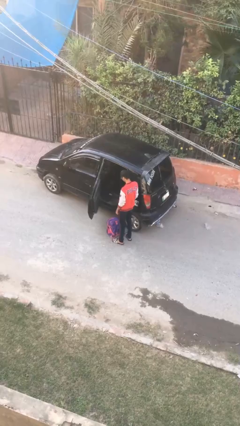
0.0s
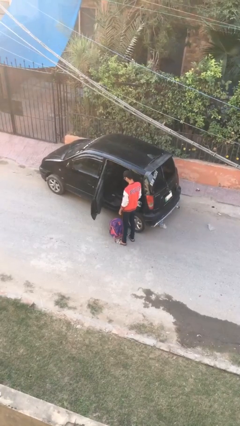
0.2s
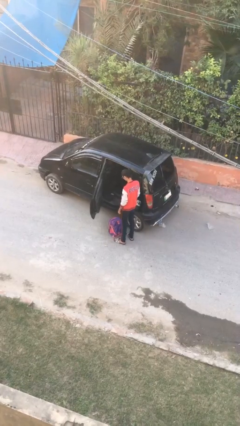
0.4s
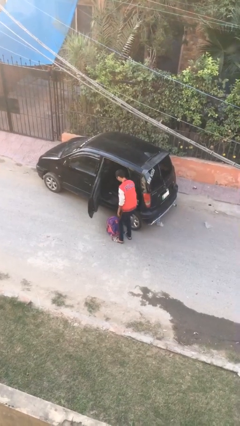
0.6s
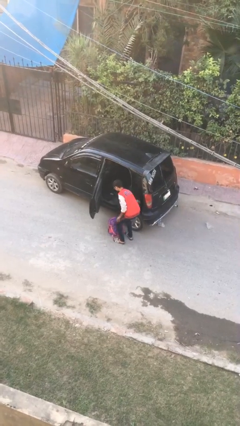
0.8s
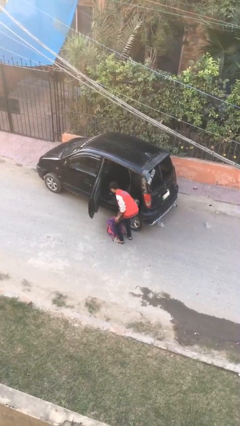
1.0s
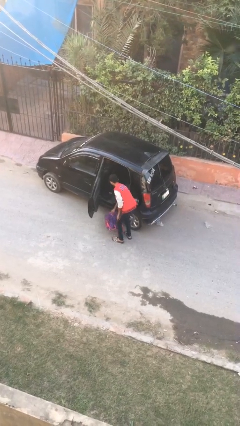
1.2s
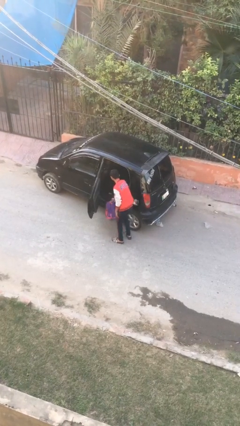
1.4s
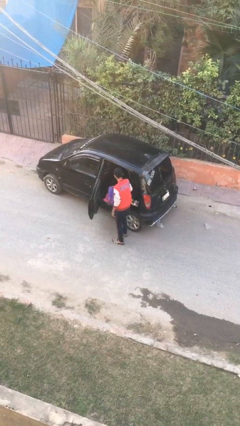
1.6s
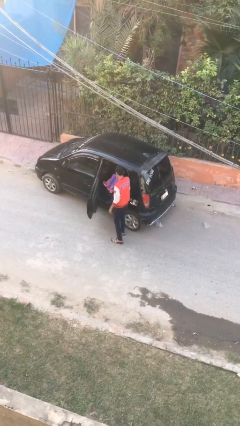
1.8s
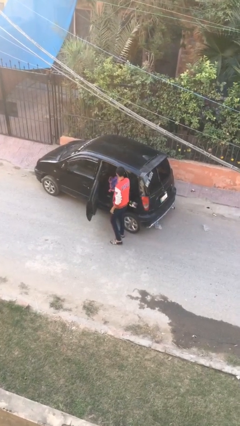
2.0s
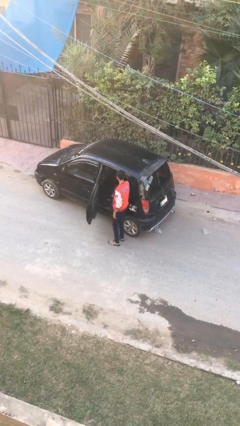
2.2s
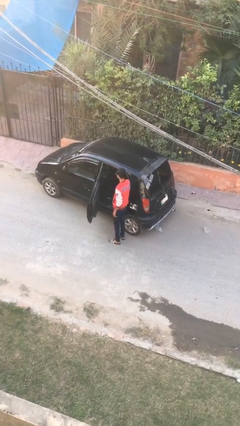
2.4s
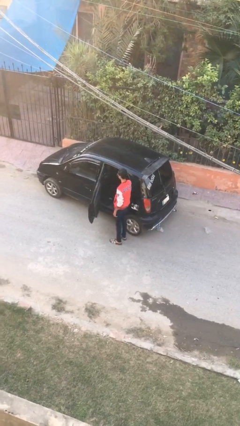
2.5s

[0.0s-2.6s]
person loads car

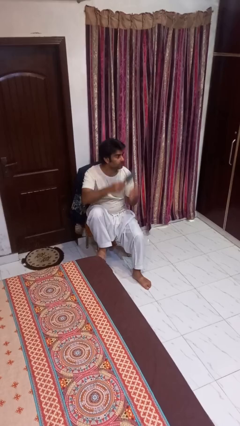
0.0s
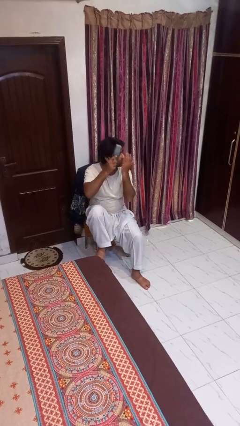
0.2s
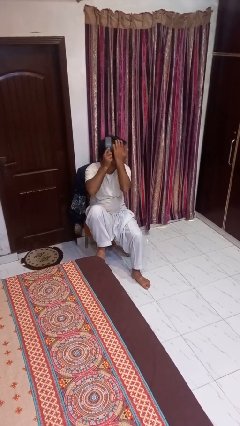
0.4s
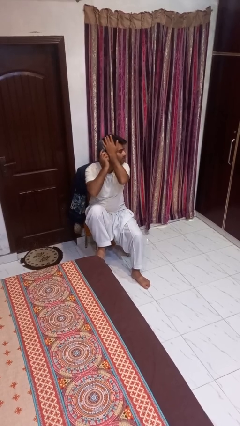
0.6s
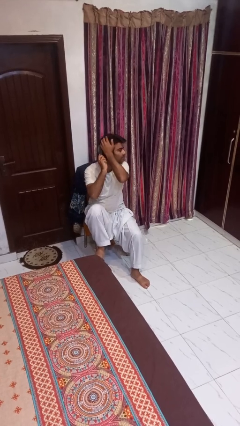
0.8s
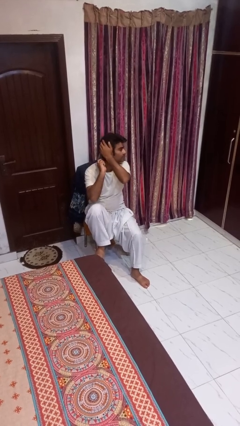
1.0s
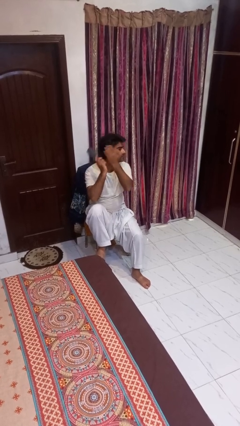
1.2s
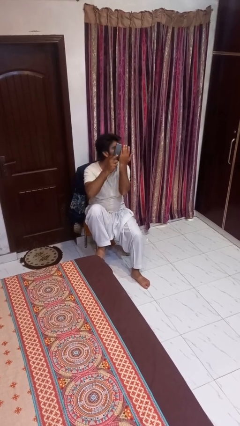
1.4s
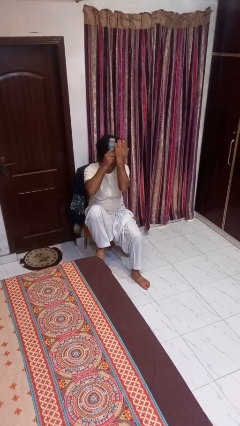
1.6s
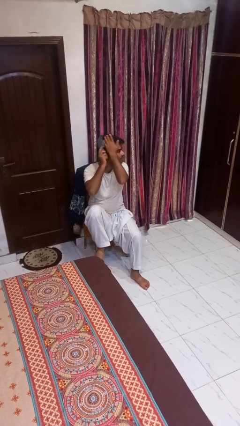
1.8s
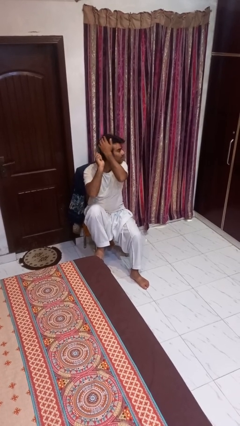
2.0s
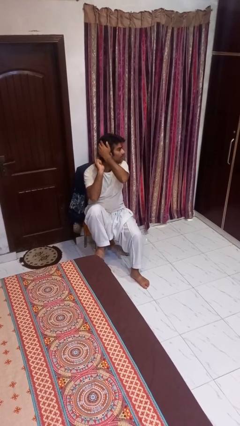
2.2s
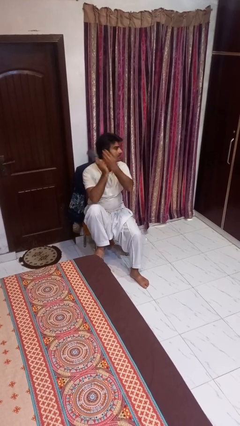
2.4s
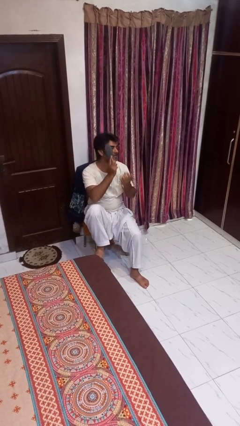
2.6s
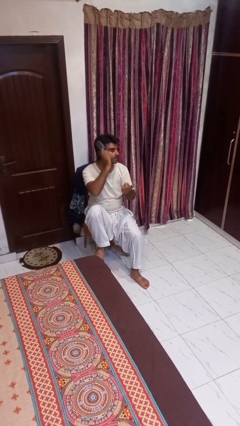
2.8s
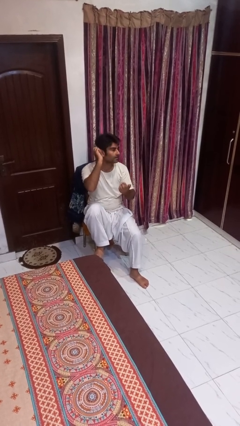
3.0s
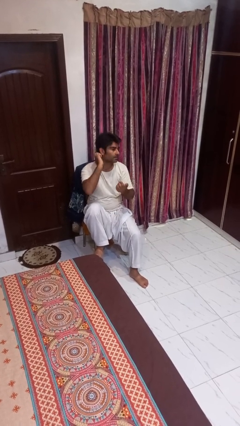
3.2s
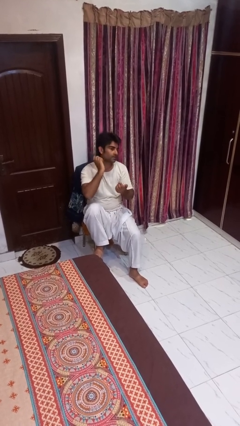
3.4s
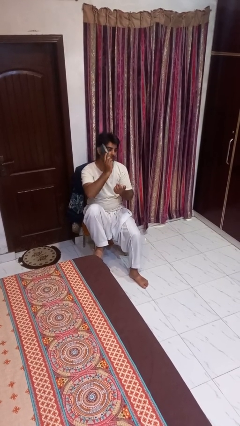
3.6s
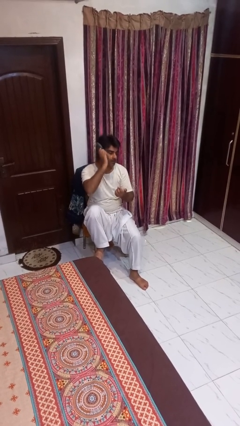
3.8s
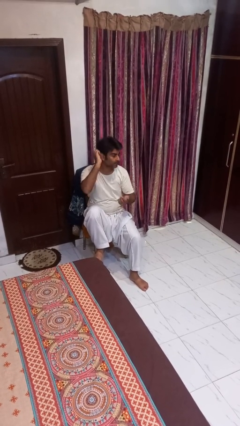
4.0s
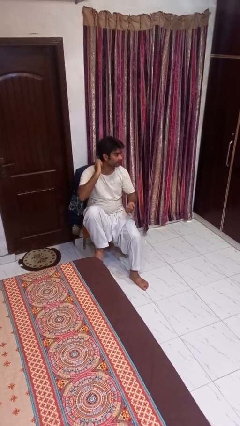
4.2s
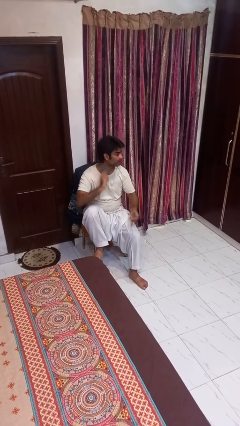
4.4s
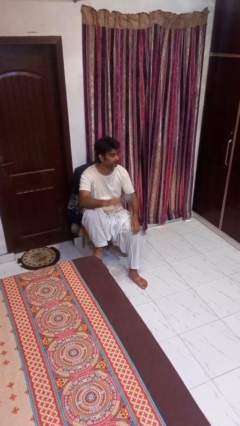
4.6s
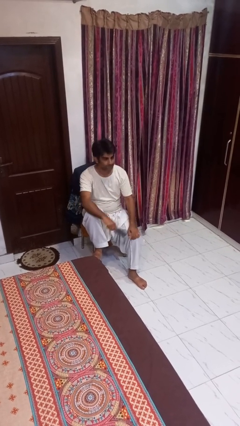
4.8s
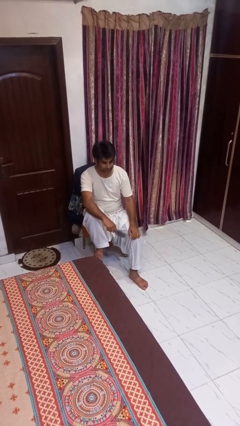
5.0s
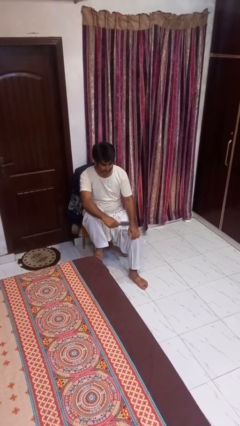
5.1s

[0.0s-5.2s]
person brushes hair

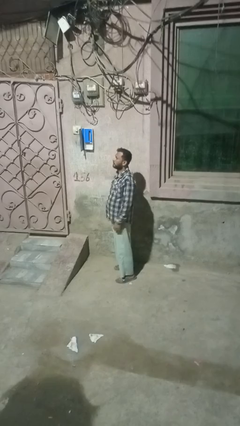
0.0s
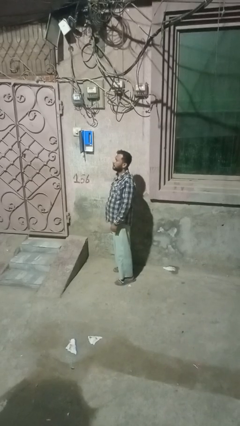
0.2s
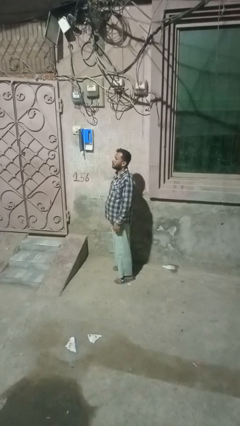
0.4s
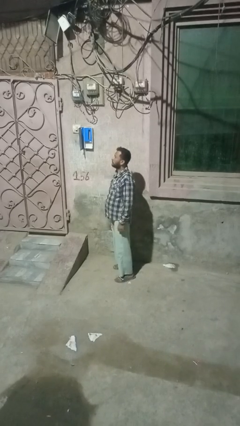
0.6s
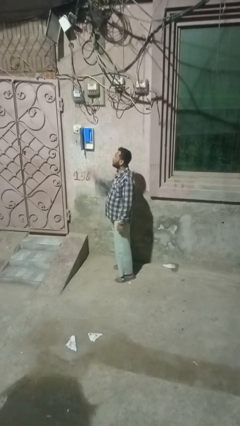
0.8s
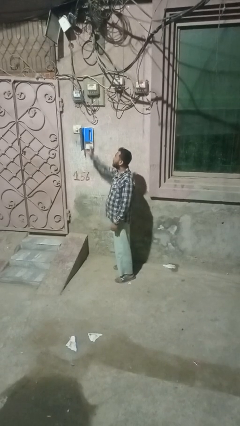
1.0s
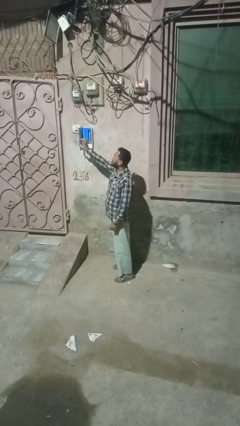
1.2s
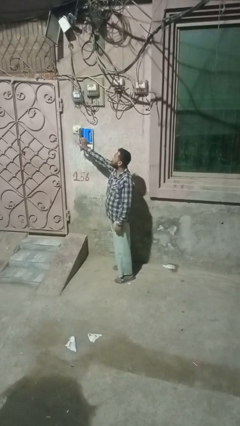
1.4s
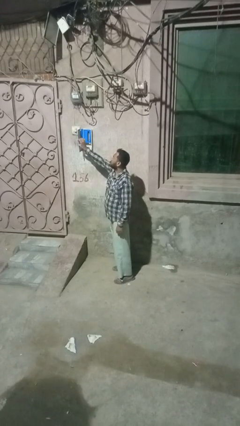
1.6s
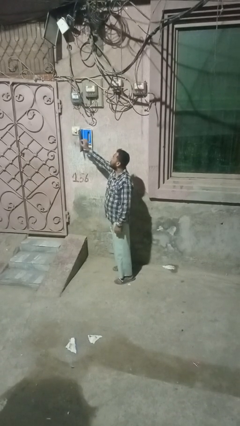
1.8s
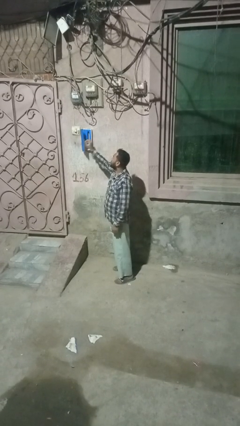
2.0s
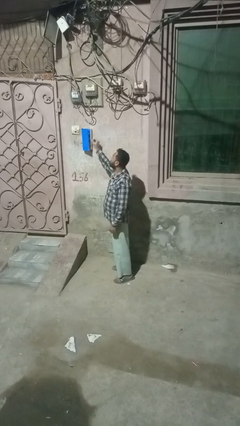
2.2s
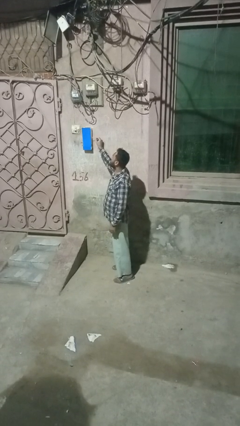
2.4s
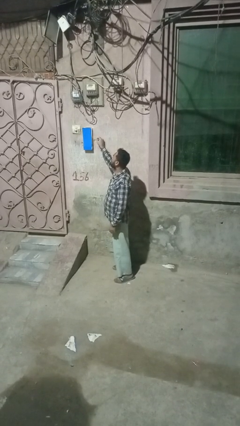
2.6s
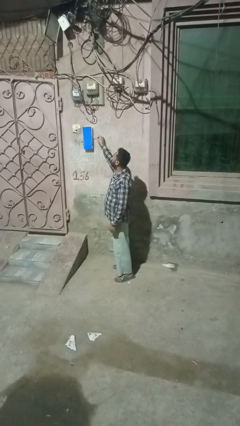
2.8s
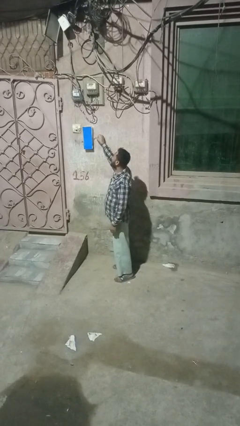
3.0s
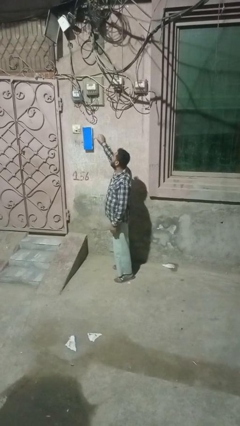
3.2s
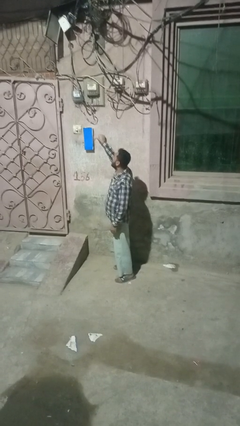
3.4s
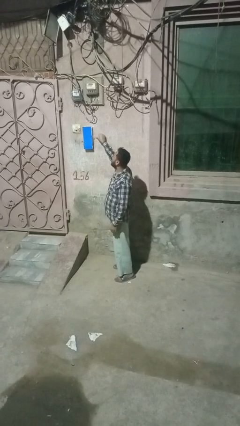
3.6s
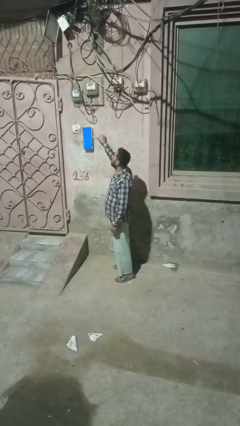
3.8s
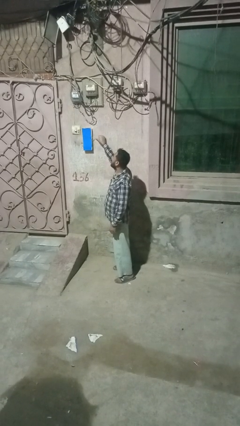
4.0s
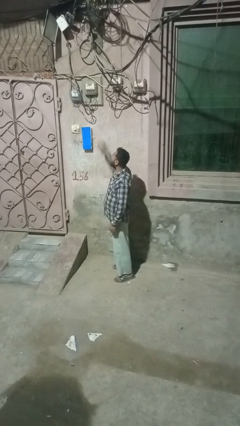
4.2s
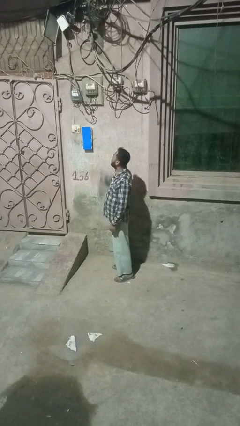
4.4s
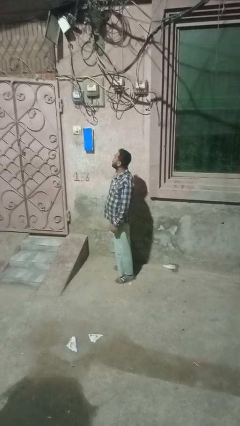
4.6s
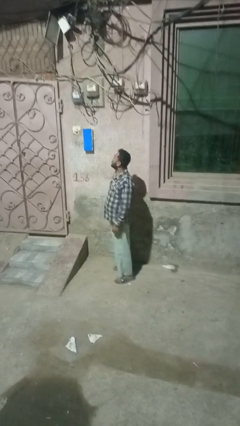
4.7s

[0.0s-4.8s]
person closes mailbox

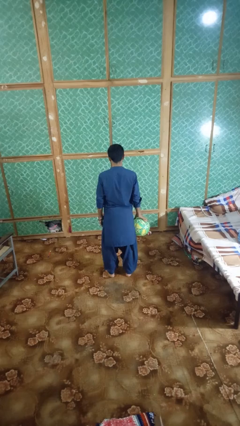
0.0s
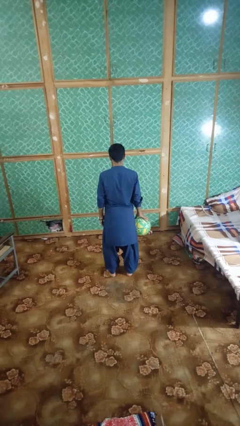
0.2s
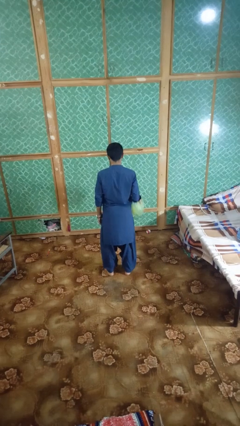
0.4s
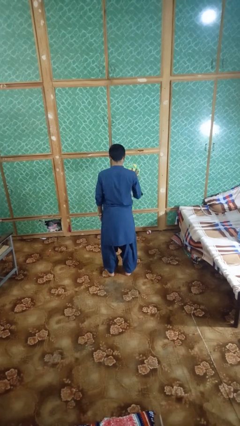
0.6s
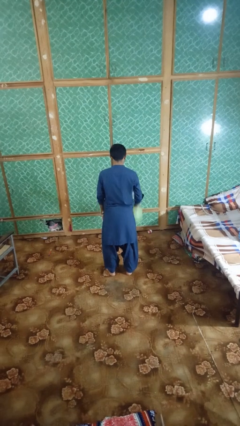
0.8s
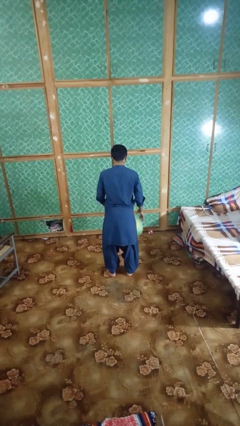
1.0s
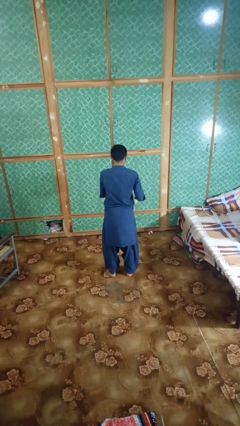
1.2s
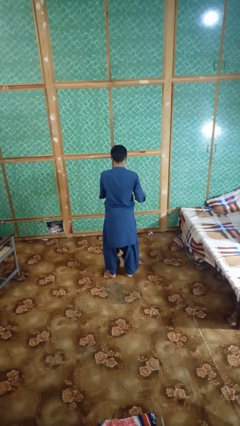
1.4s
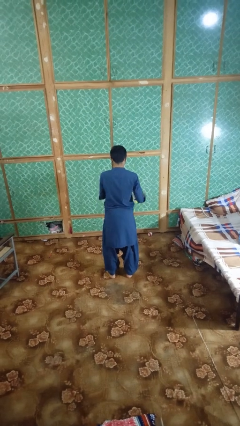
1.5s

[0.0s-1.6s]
person bounces ball on floor

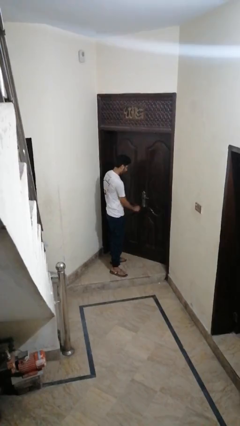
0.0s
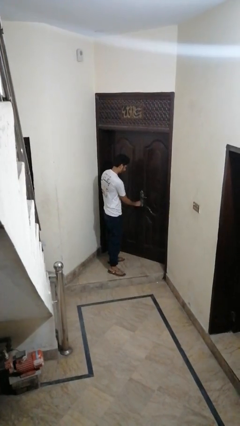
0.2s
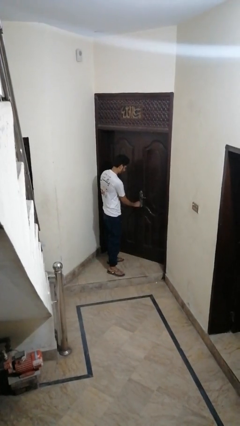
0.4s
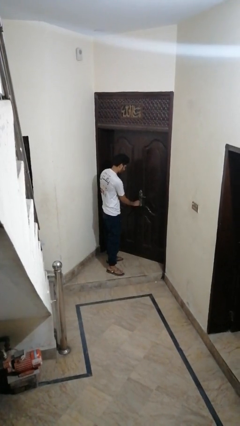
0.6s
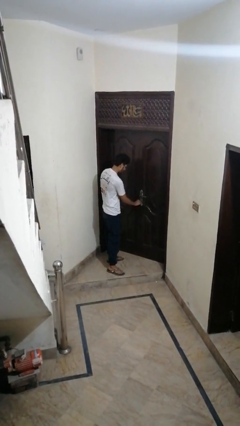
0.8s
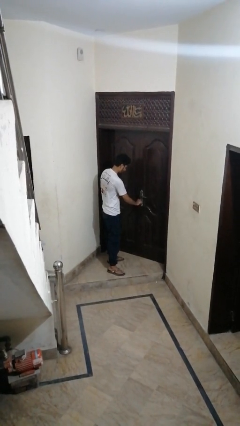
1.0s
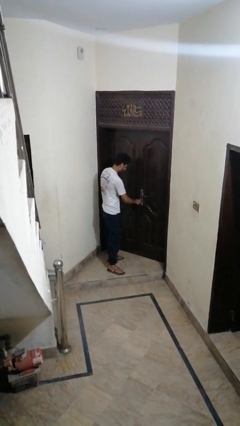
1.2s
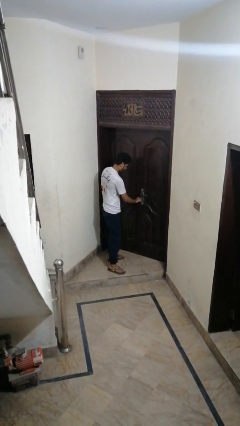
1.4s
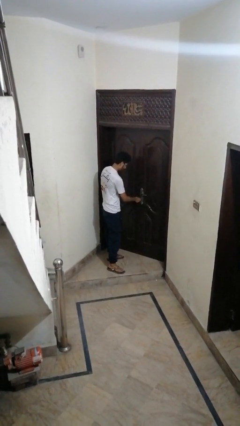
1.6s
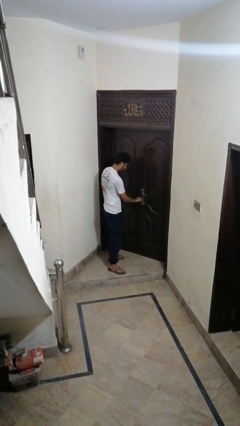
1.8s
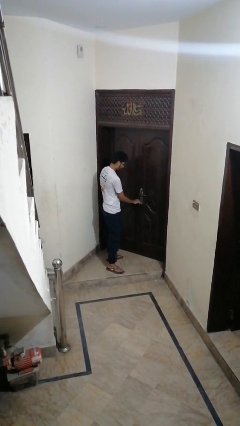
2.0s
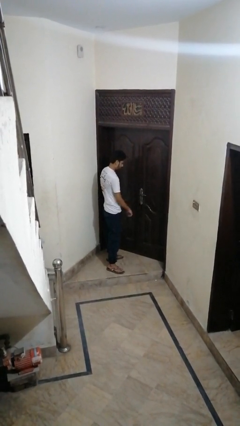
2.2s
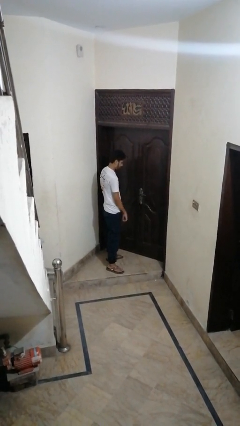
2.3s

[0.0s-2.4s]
person locks door with keys

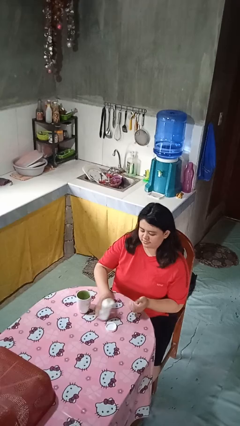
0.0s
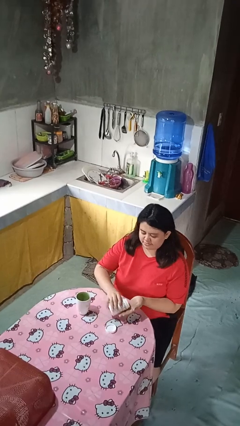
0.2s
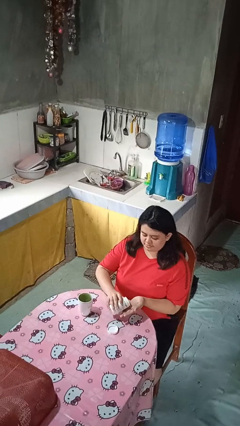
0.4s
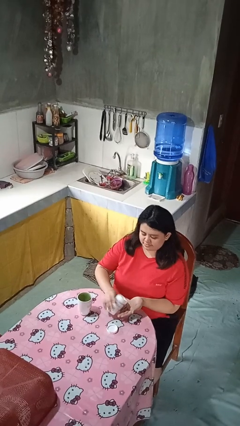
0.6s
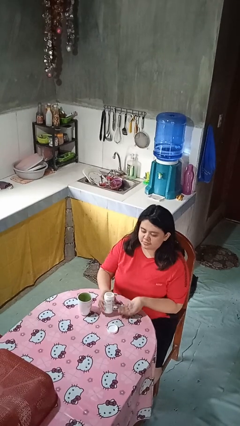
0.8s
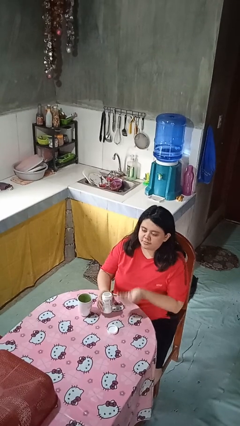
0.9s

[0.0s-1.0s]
person takes medicine pills
